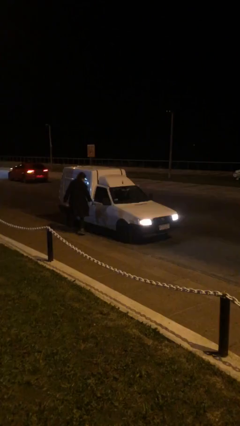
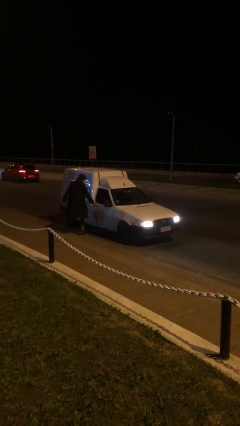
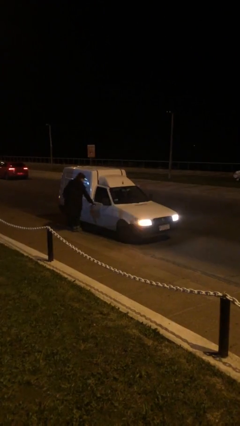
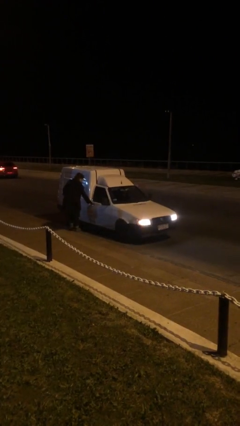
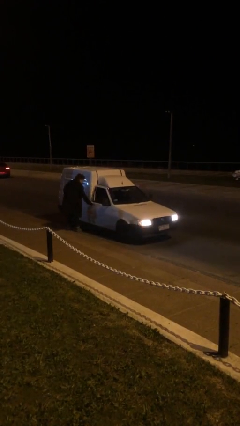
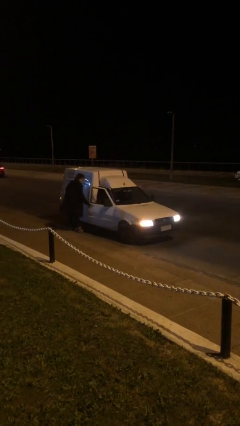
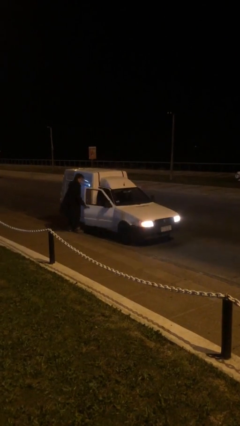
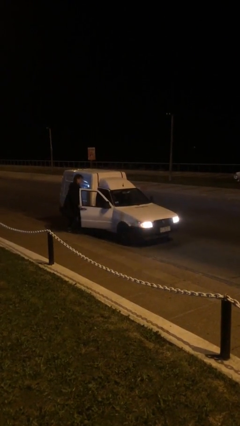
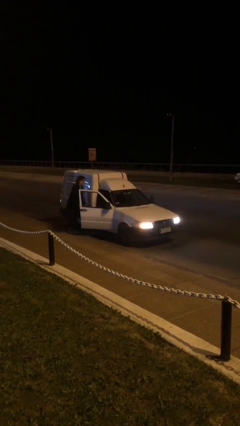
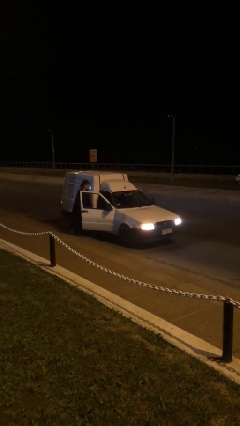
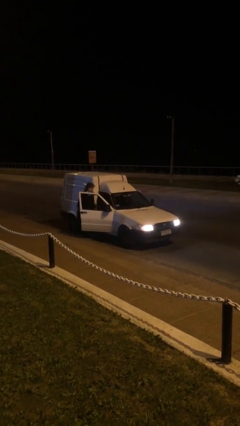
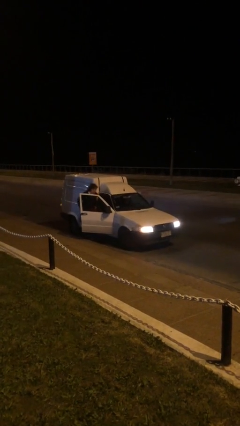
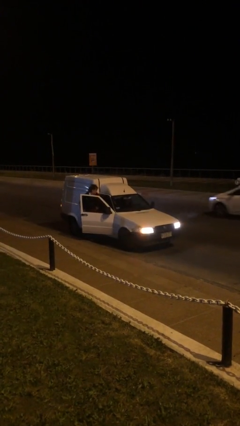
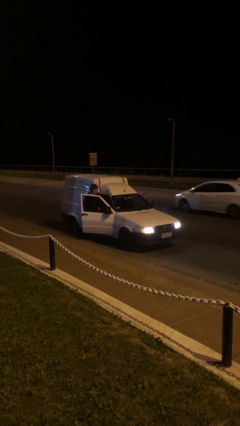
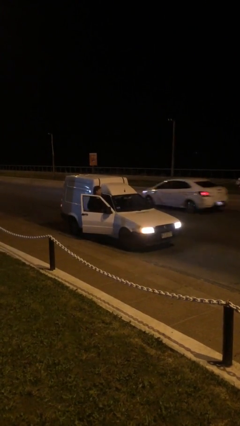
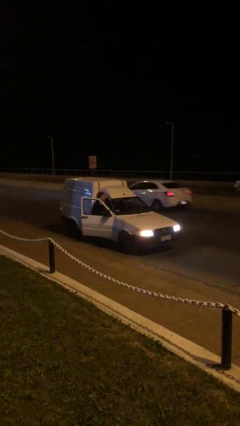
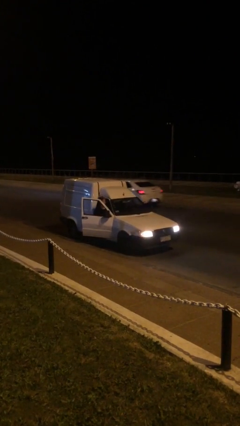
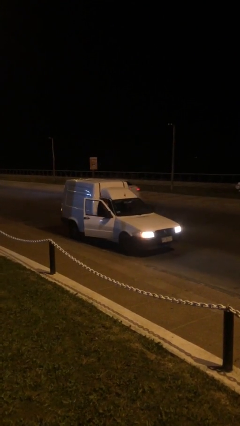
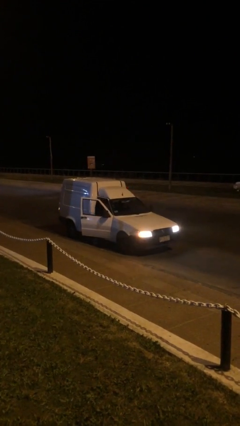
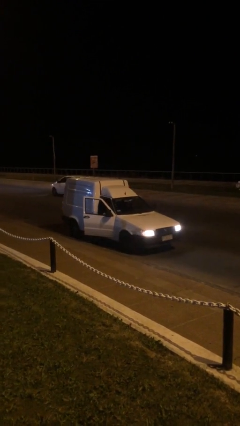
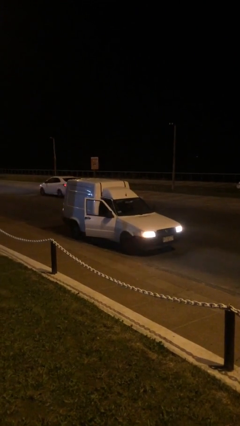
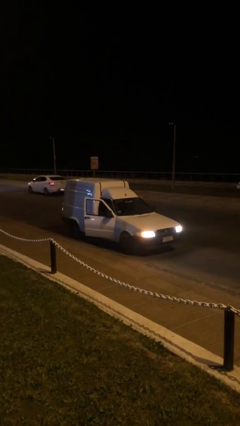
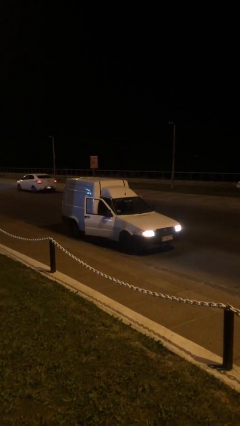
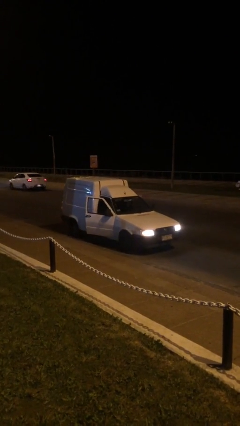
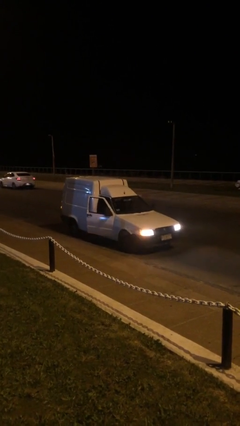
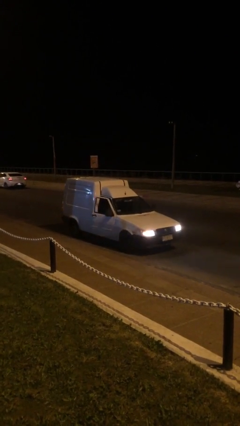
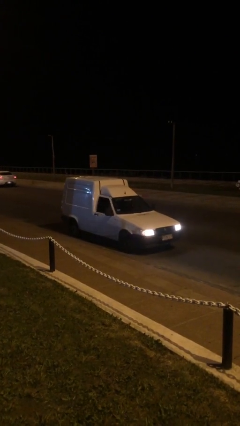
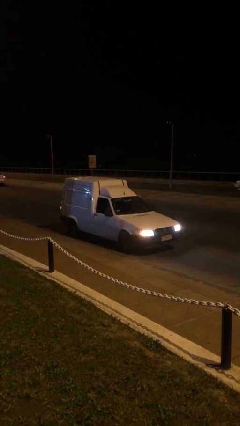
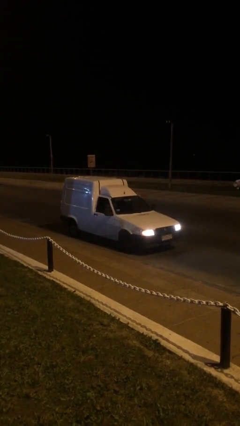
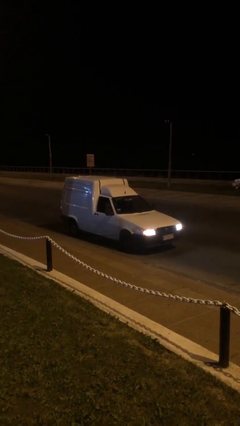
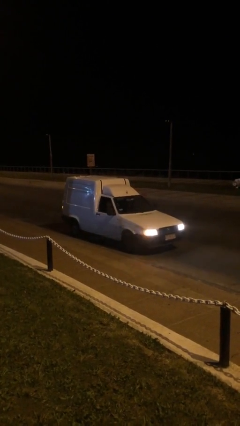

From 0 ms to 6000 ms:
car picks up person

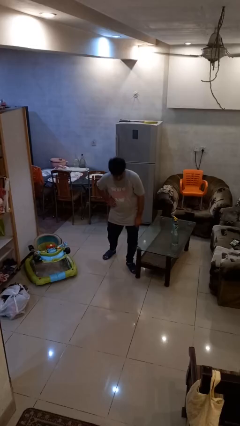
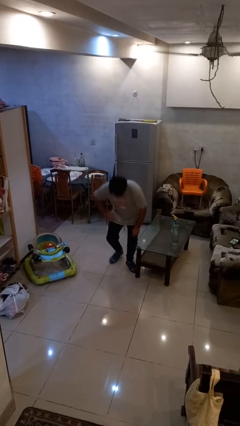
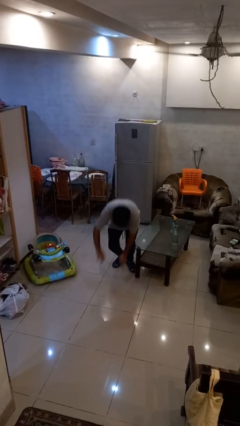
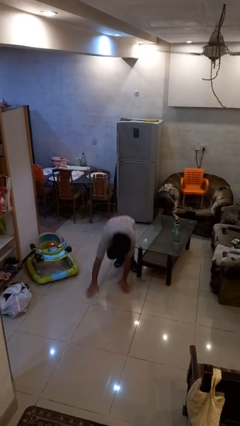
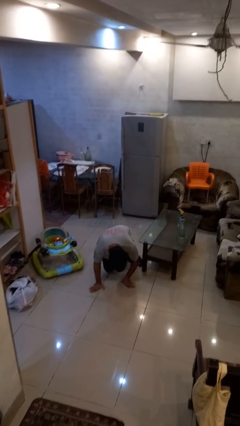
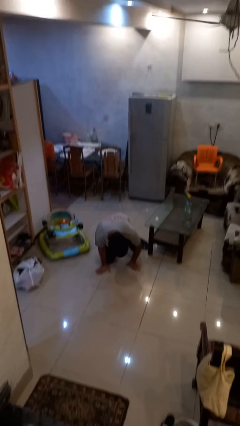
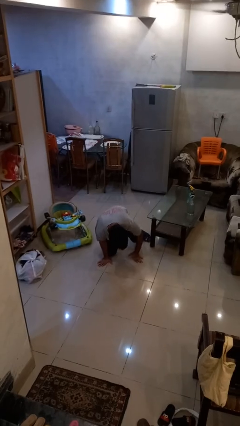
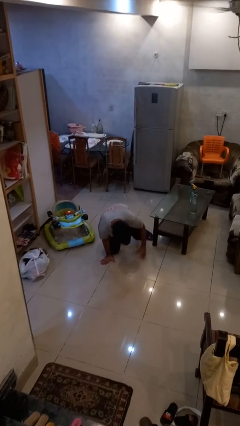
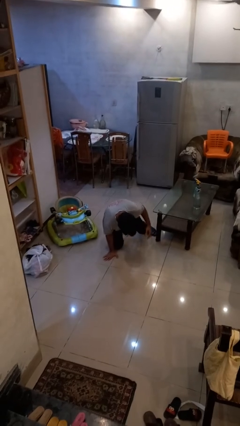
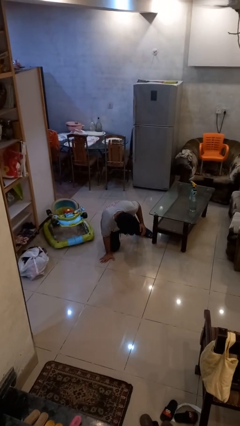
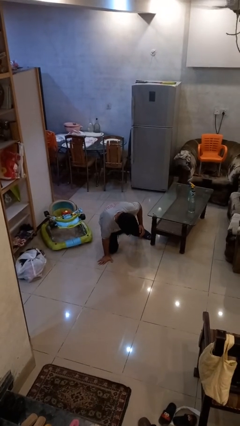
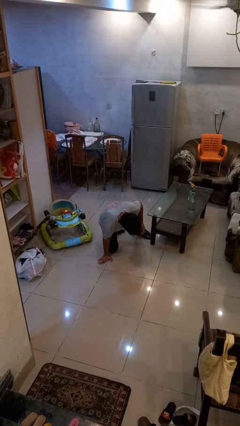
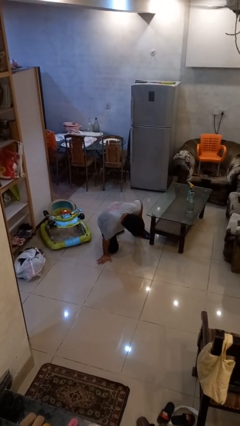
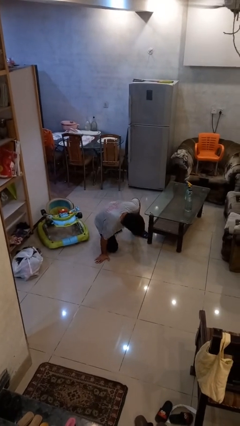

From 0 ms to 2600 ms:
person trips on object on floor

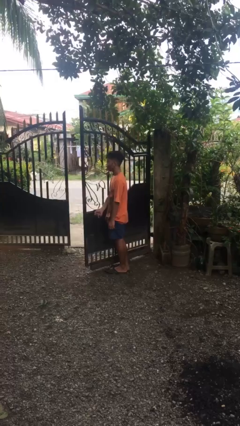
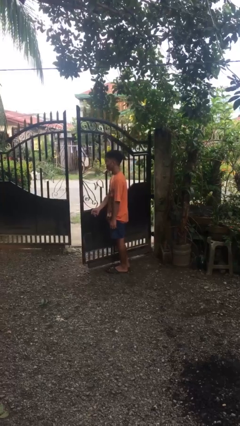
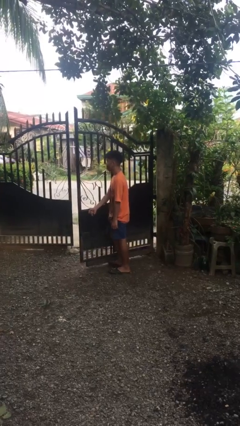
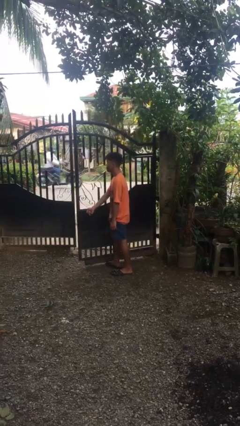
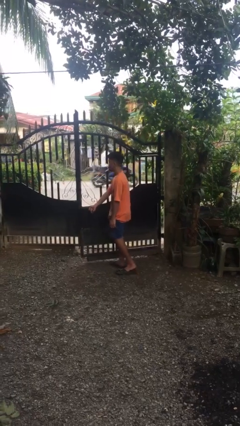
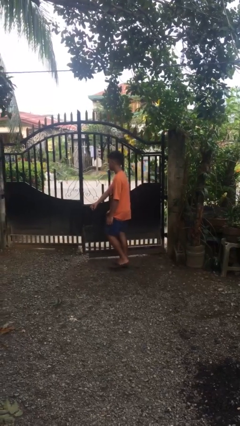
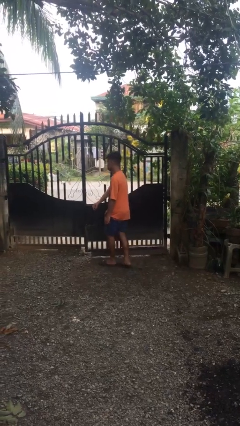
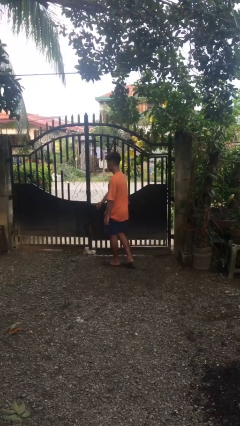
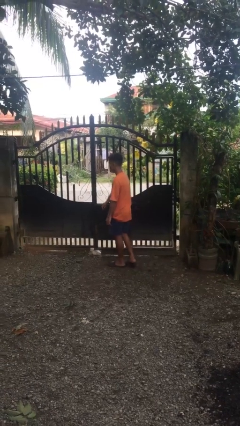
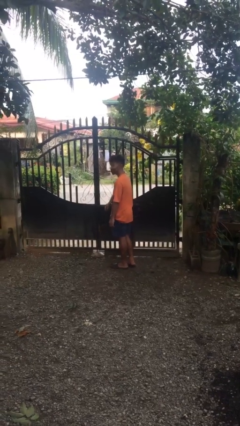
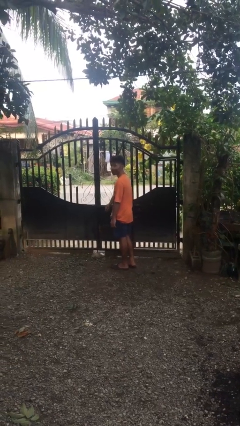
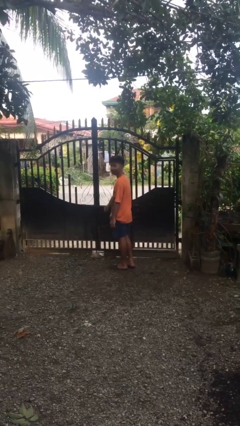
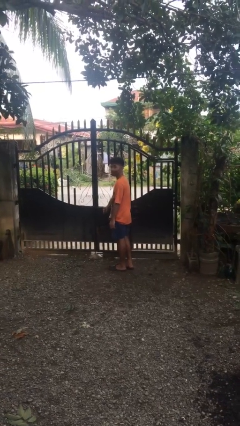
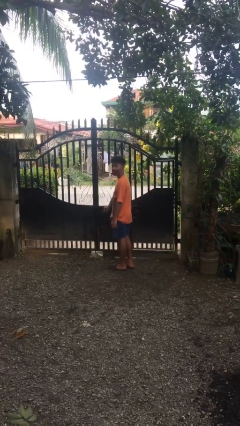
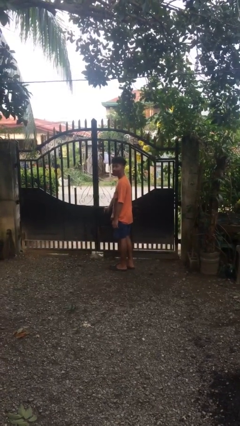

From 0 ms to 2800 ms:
person closes gate

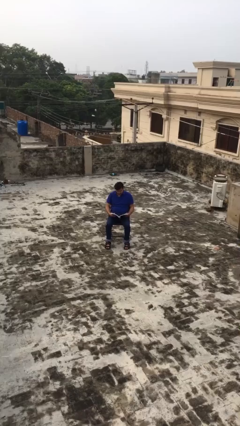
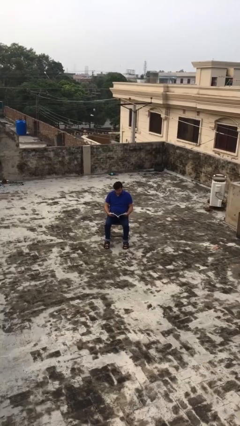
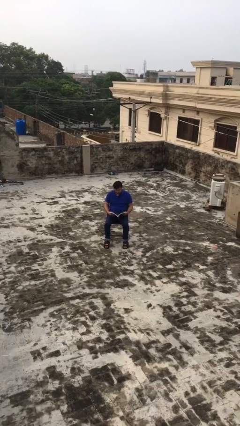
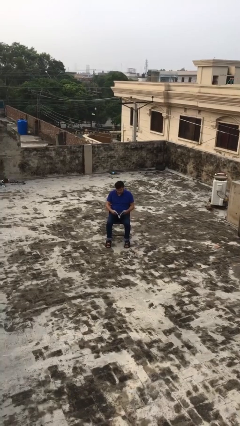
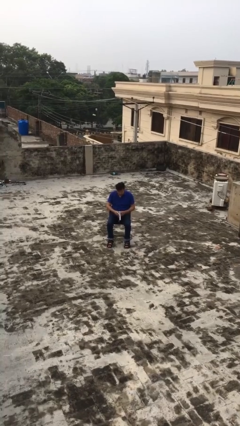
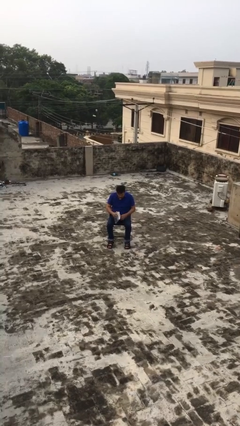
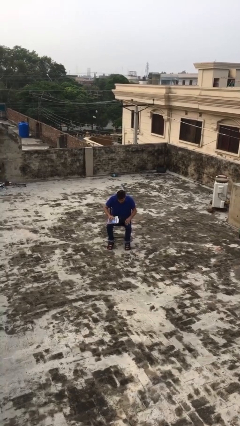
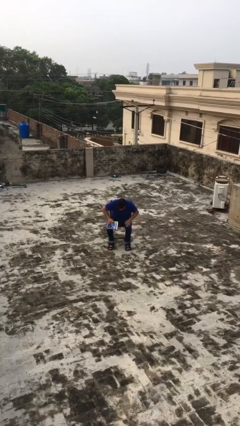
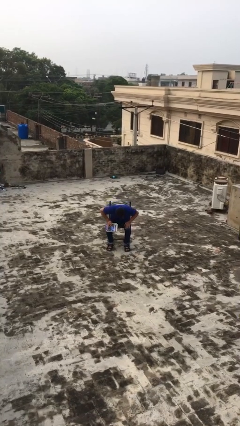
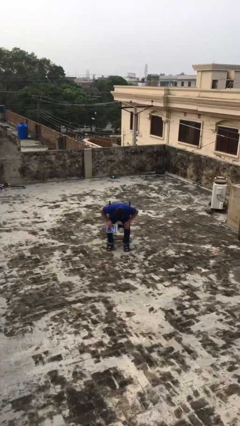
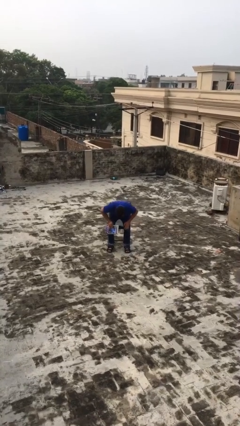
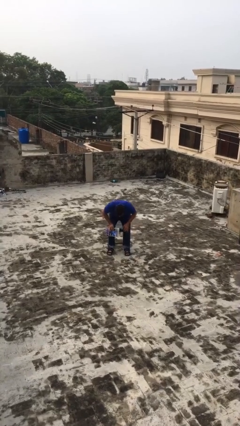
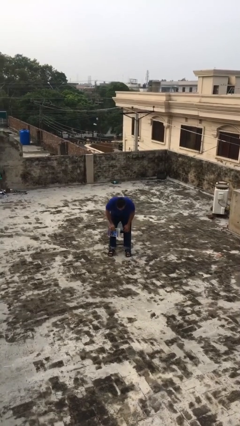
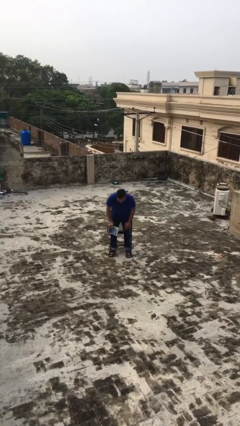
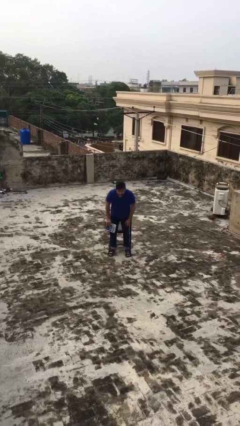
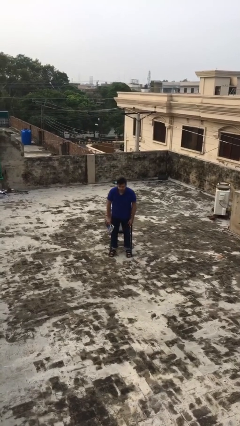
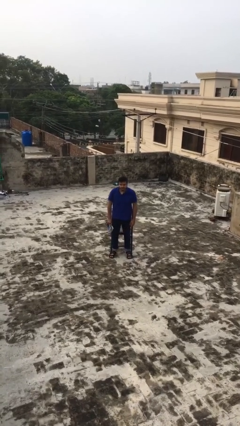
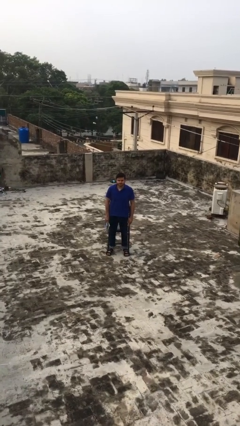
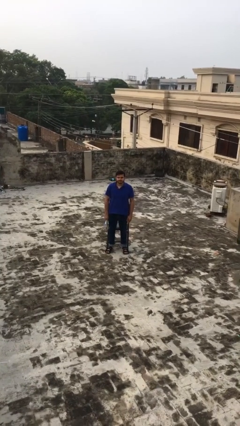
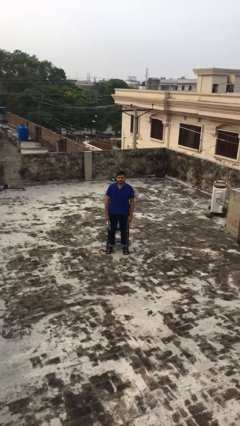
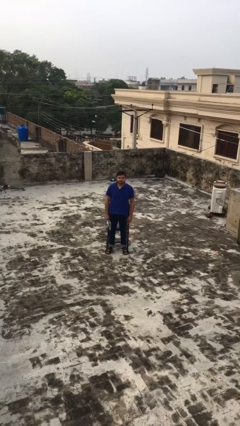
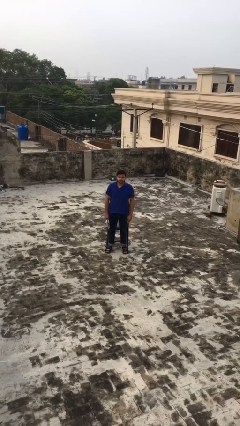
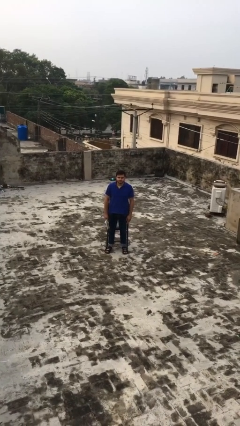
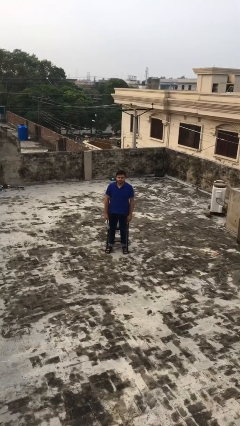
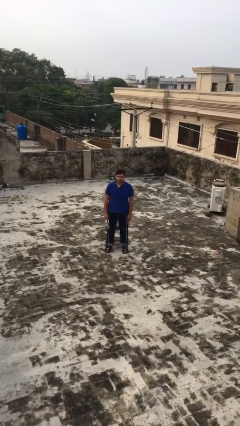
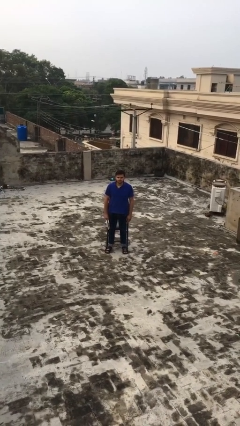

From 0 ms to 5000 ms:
person stands up

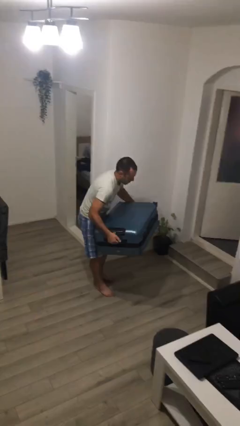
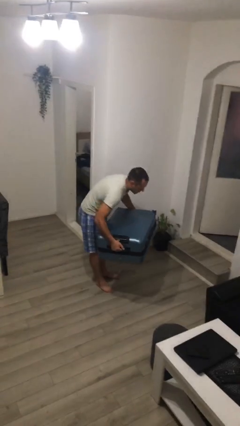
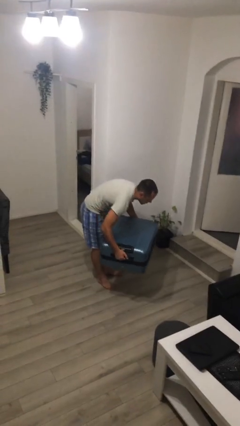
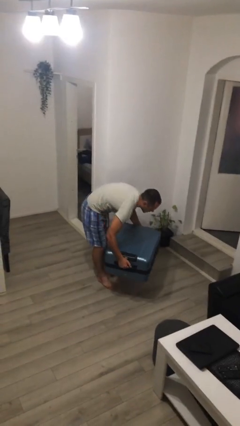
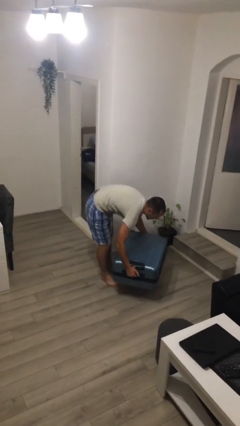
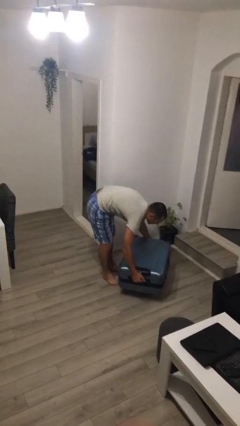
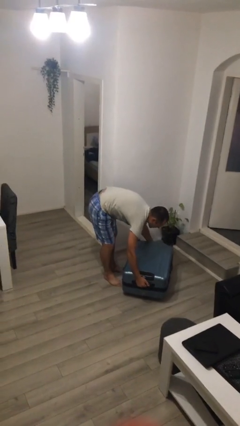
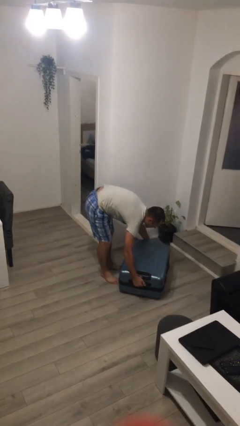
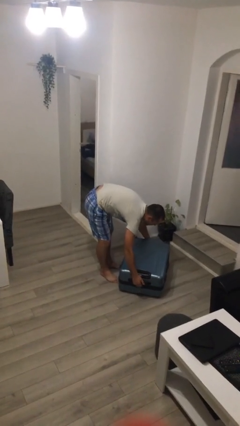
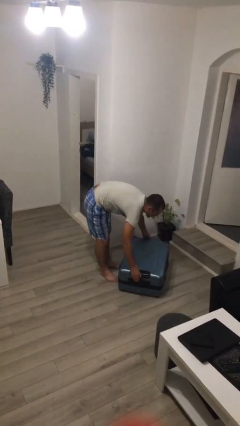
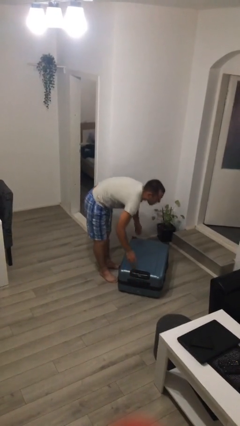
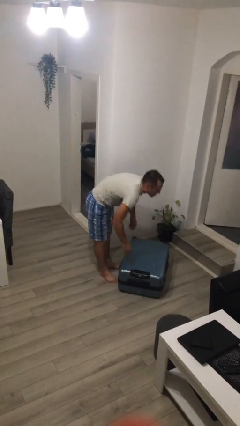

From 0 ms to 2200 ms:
person puts down object on floor
